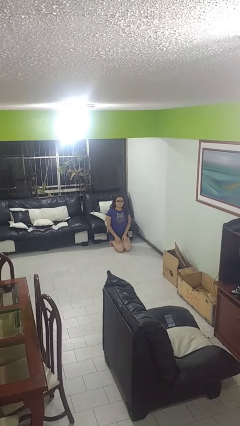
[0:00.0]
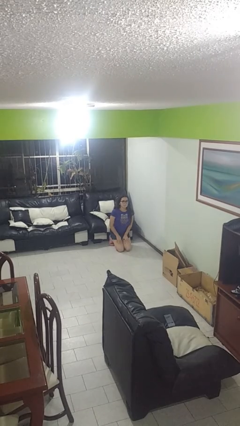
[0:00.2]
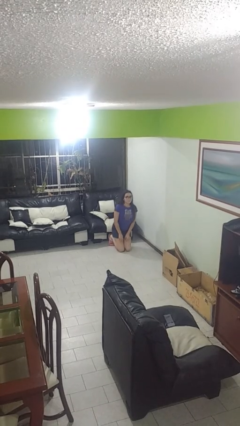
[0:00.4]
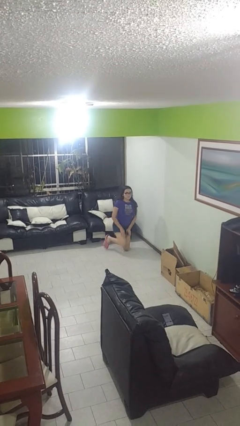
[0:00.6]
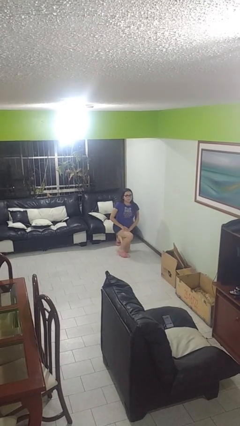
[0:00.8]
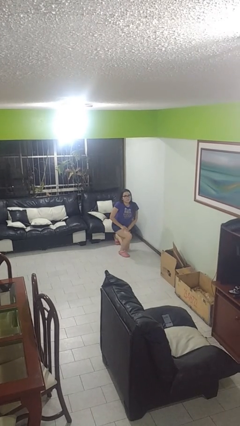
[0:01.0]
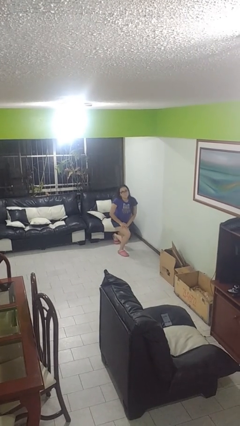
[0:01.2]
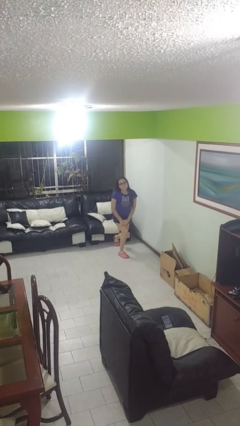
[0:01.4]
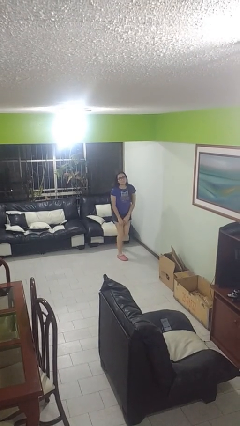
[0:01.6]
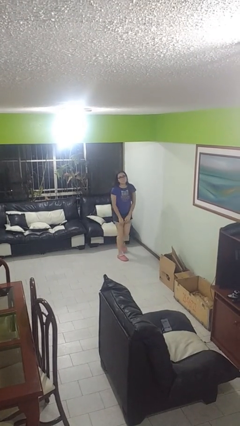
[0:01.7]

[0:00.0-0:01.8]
person stands up from floor

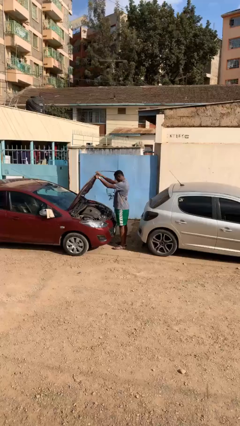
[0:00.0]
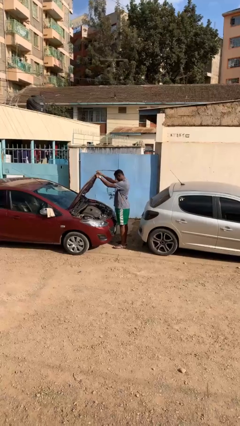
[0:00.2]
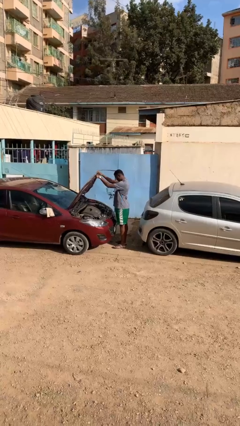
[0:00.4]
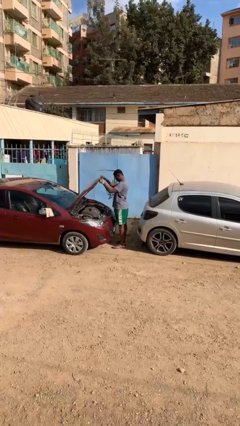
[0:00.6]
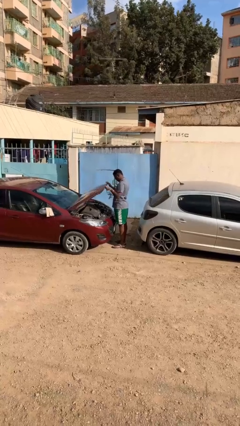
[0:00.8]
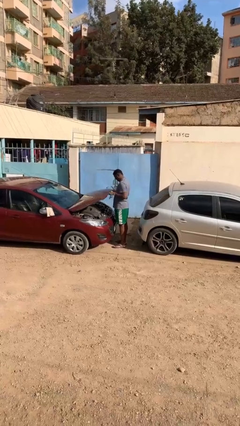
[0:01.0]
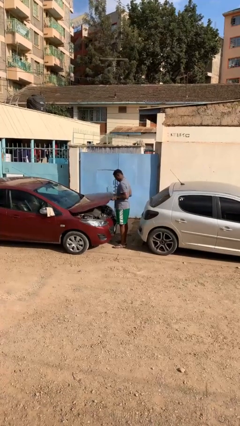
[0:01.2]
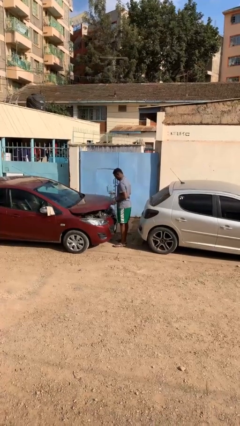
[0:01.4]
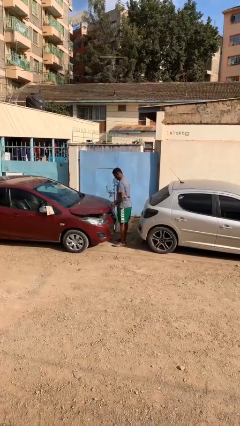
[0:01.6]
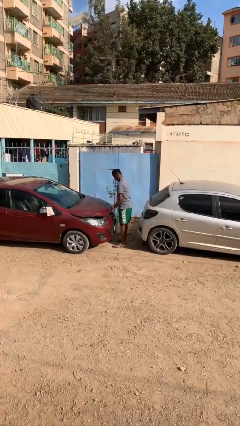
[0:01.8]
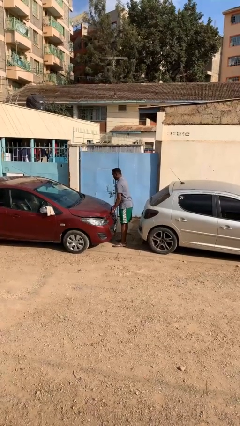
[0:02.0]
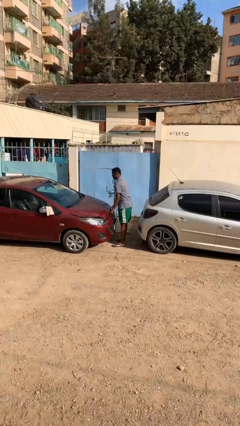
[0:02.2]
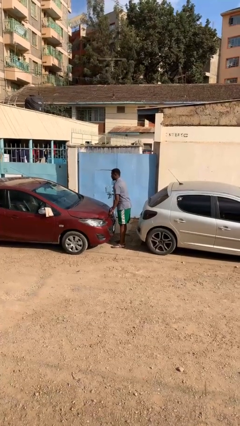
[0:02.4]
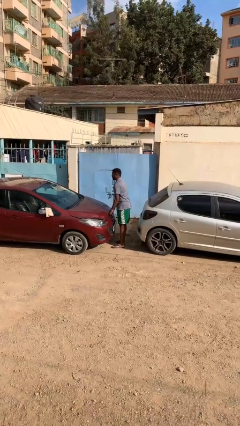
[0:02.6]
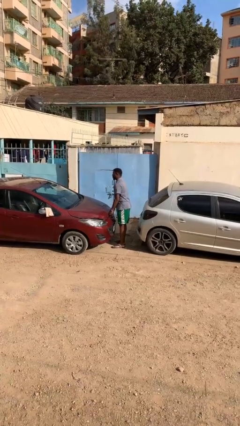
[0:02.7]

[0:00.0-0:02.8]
person closes car hood

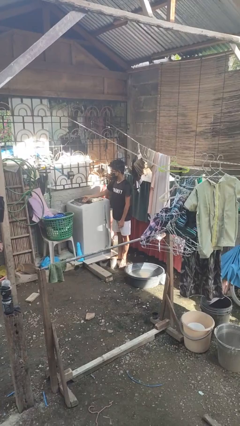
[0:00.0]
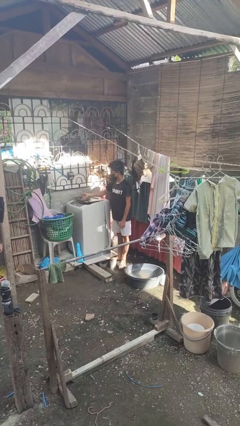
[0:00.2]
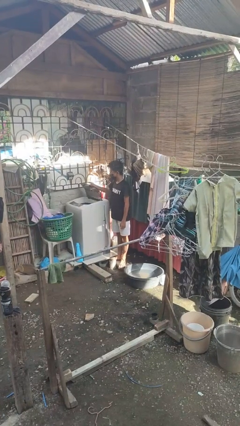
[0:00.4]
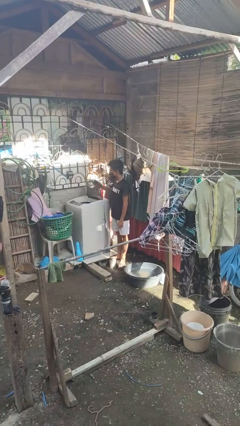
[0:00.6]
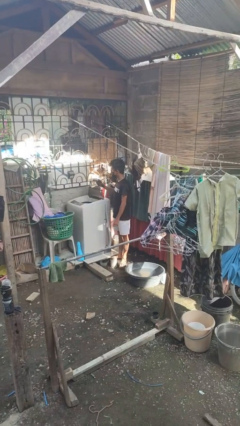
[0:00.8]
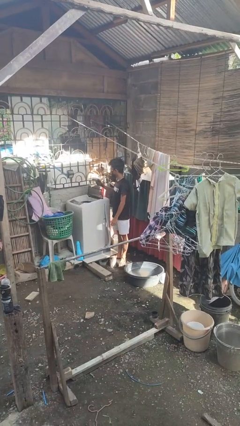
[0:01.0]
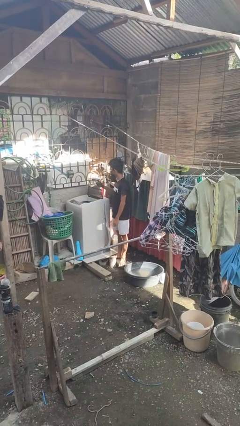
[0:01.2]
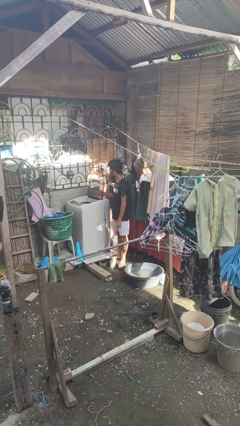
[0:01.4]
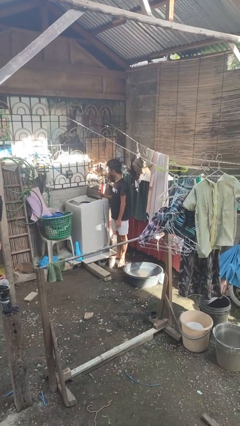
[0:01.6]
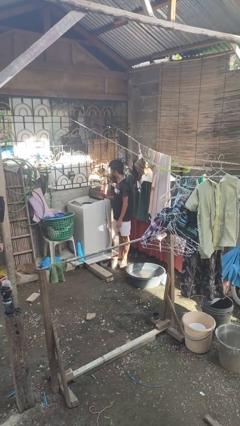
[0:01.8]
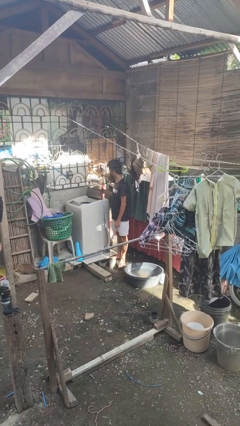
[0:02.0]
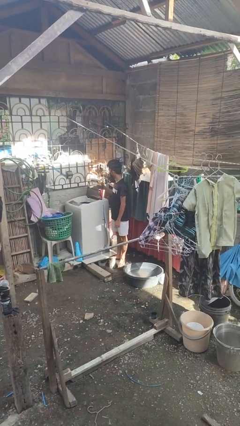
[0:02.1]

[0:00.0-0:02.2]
person opens clothes washer

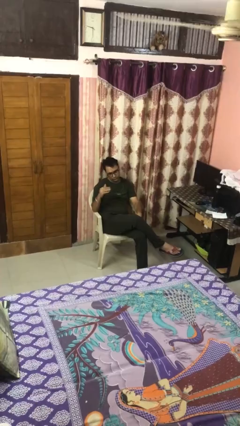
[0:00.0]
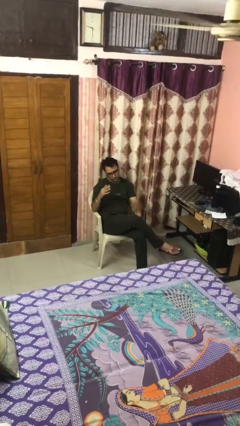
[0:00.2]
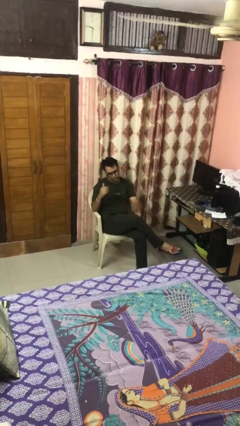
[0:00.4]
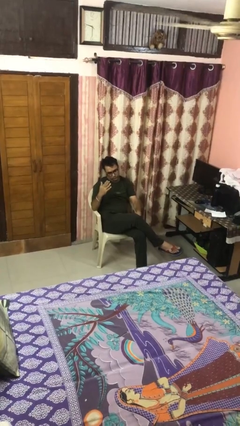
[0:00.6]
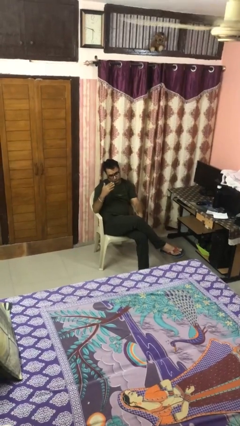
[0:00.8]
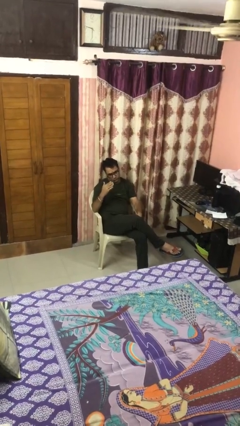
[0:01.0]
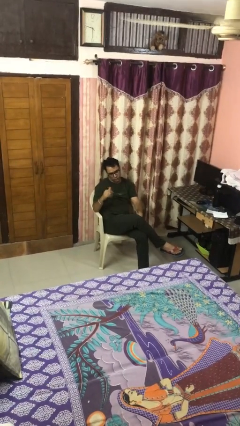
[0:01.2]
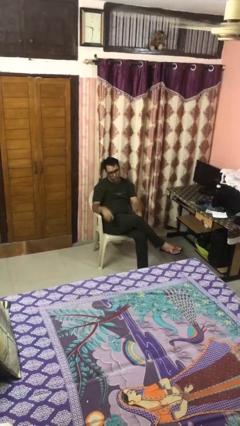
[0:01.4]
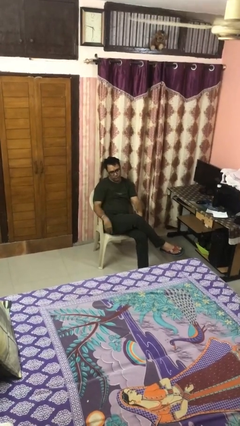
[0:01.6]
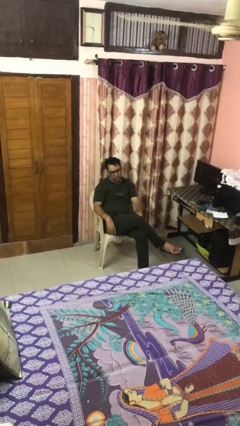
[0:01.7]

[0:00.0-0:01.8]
person gestures come here

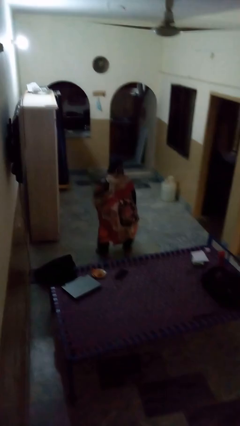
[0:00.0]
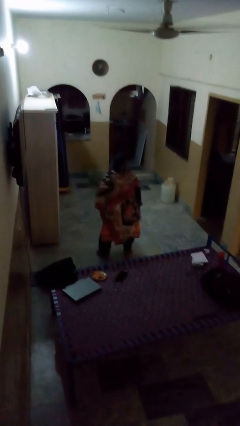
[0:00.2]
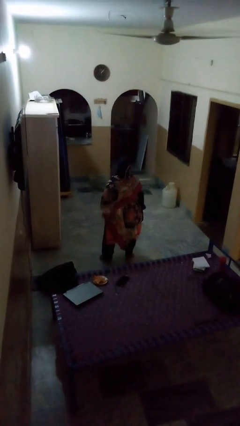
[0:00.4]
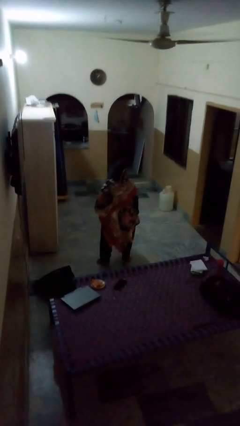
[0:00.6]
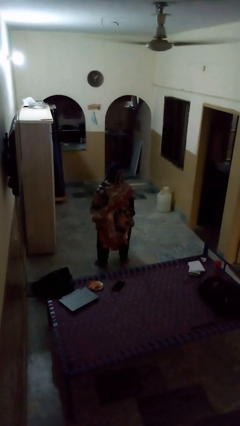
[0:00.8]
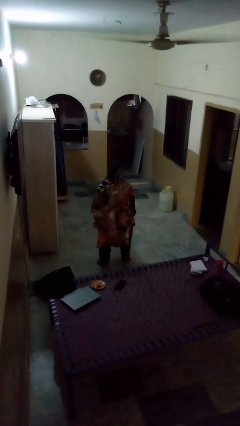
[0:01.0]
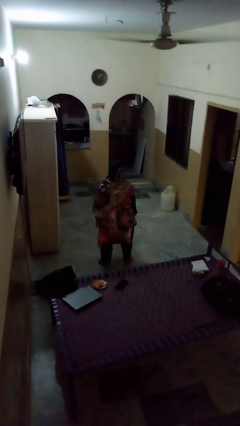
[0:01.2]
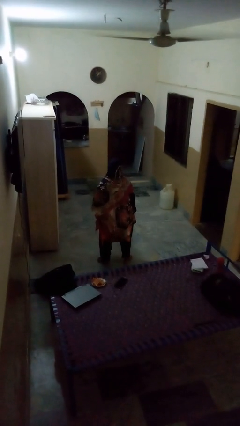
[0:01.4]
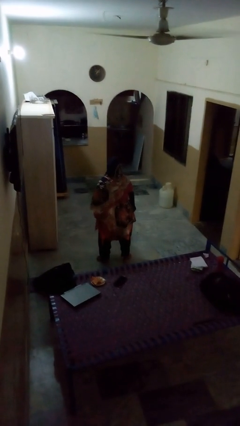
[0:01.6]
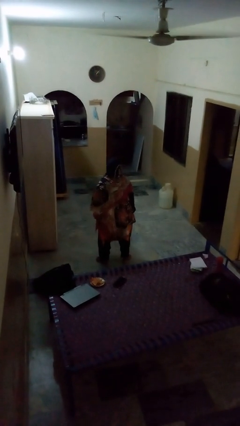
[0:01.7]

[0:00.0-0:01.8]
person stands up

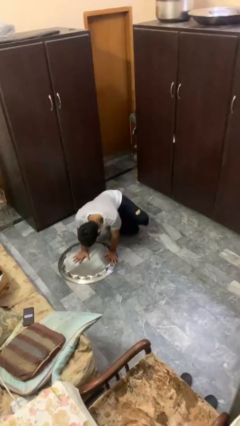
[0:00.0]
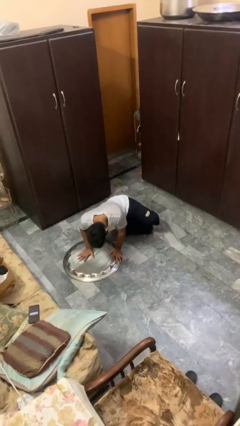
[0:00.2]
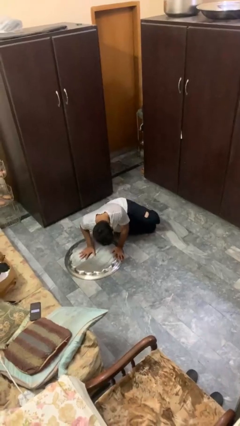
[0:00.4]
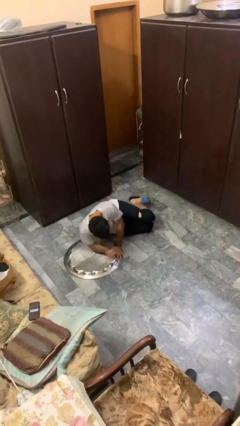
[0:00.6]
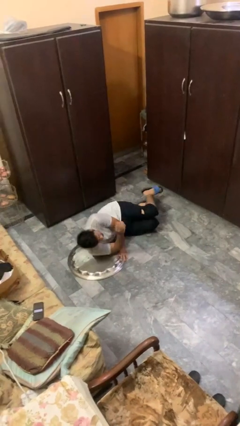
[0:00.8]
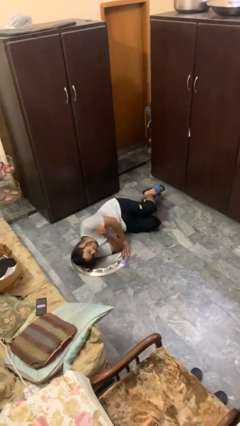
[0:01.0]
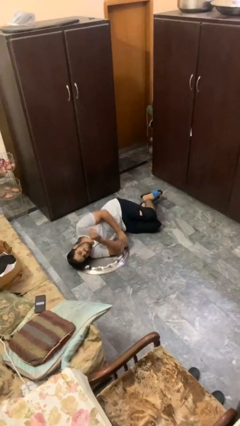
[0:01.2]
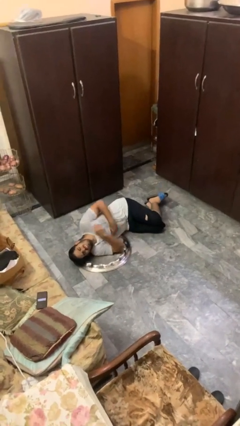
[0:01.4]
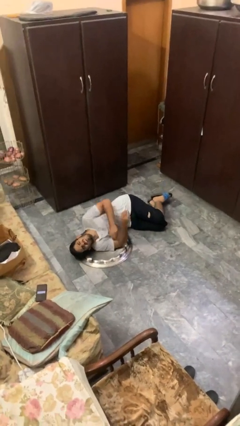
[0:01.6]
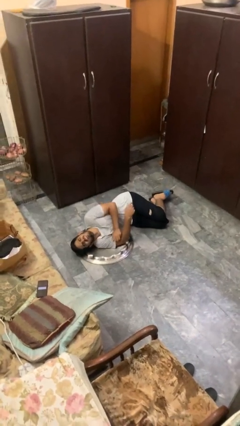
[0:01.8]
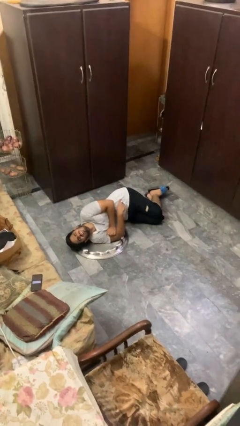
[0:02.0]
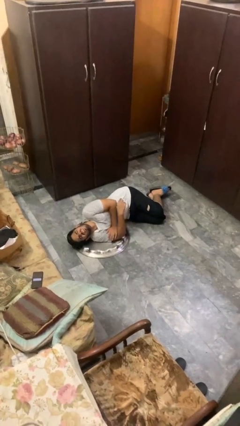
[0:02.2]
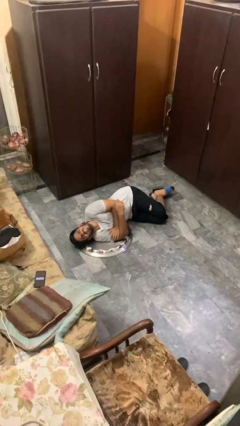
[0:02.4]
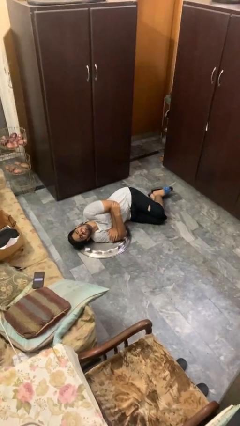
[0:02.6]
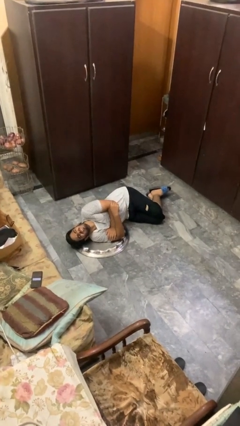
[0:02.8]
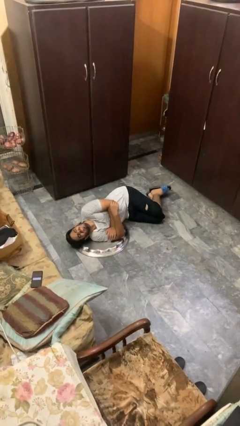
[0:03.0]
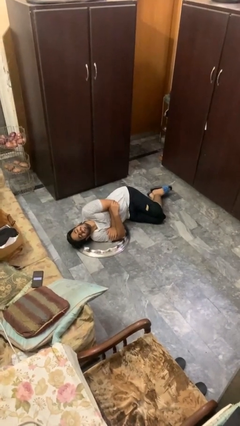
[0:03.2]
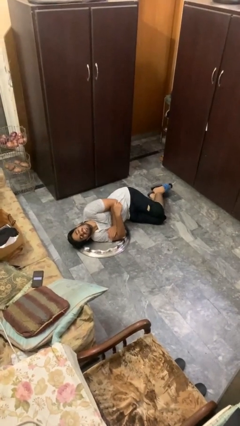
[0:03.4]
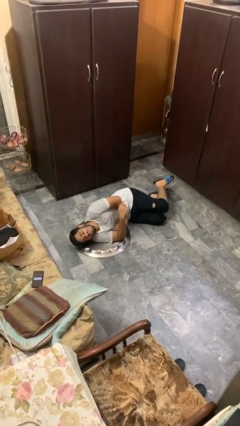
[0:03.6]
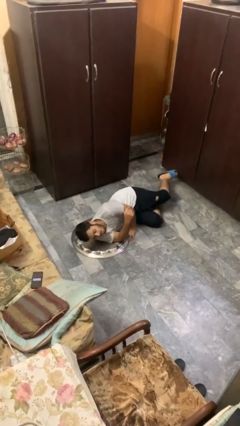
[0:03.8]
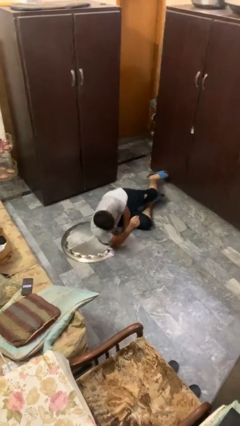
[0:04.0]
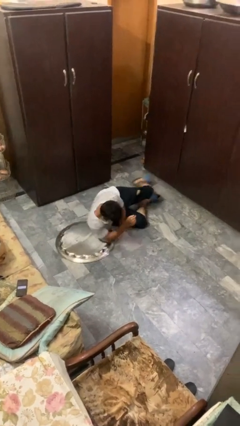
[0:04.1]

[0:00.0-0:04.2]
person lies down on floor

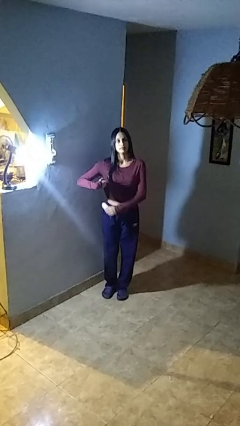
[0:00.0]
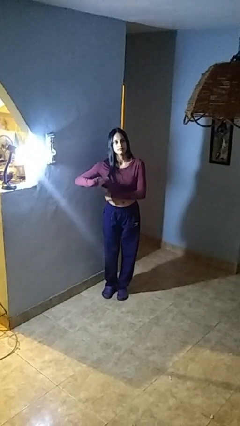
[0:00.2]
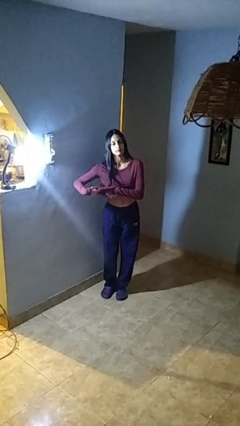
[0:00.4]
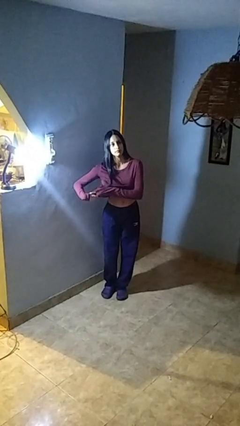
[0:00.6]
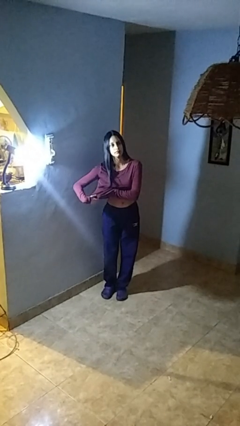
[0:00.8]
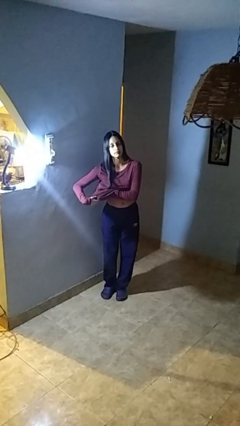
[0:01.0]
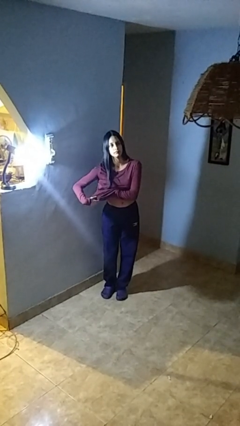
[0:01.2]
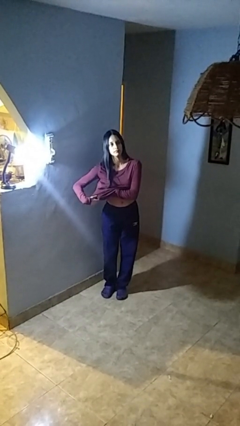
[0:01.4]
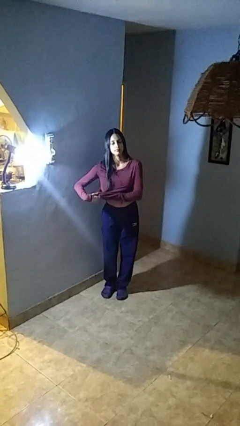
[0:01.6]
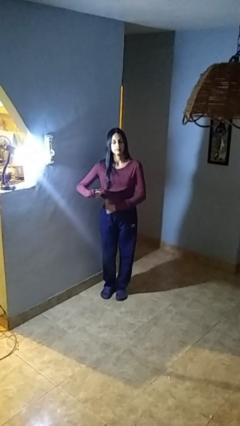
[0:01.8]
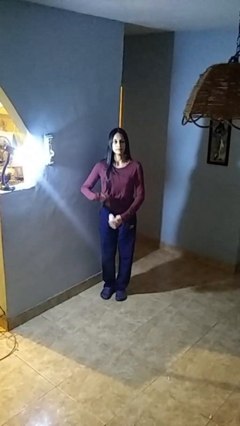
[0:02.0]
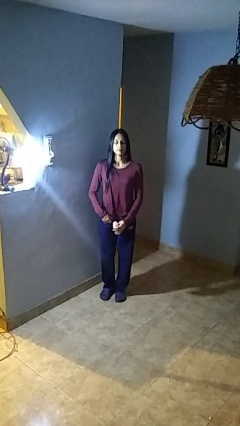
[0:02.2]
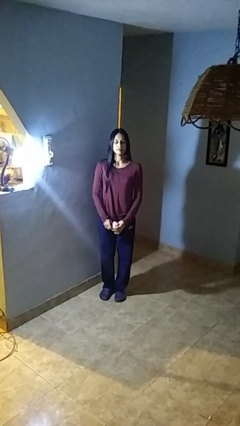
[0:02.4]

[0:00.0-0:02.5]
person applies deodorant
